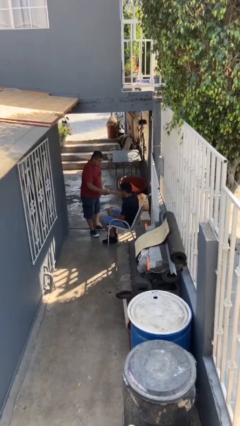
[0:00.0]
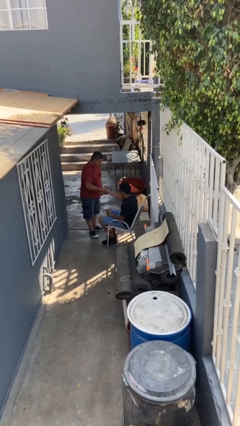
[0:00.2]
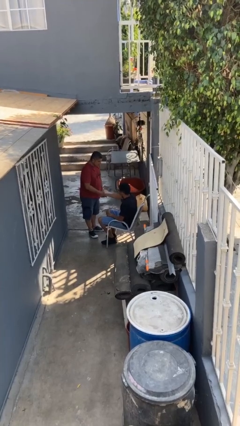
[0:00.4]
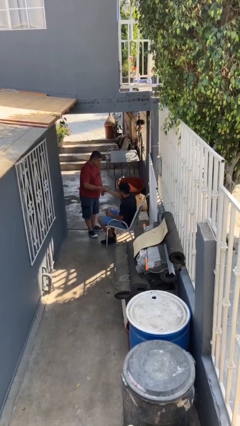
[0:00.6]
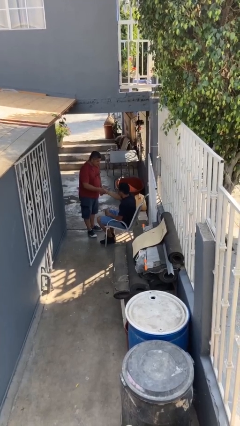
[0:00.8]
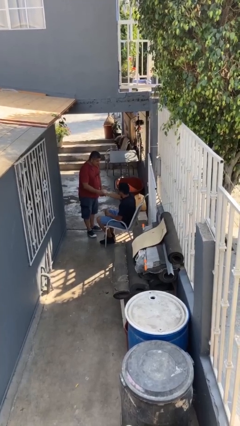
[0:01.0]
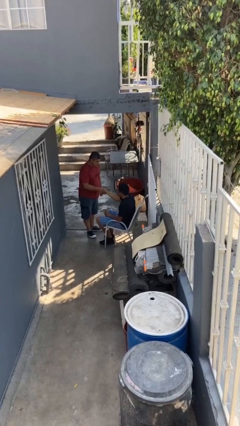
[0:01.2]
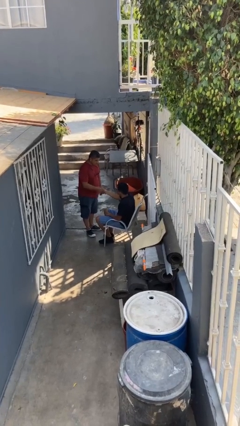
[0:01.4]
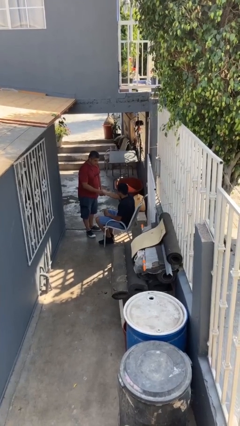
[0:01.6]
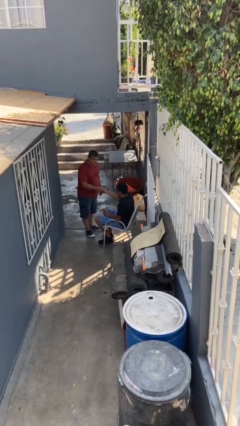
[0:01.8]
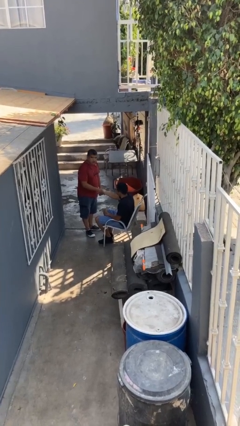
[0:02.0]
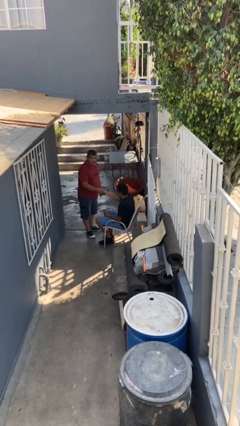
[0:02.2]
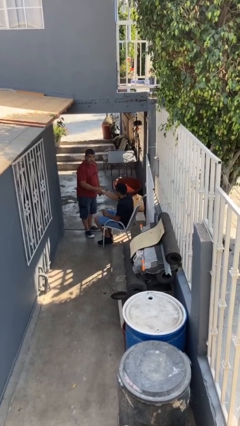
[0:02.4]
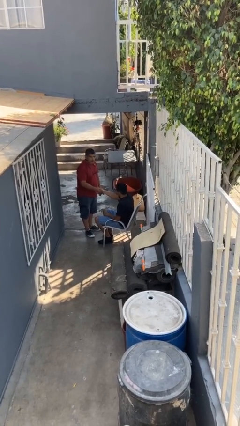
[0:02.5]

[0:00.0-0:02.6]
person shakes hand

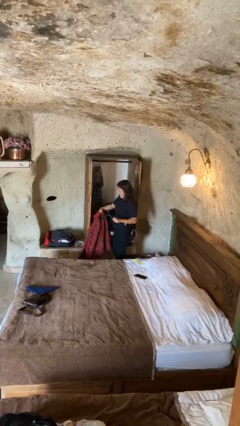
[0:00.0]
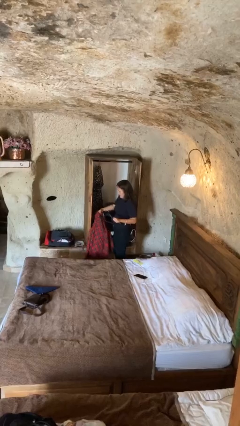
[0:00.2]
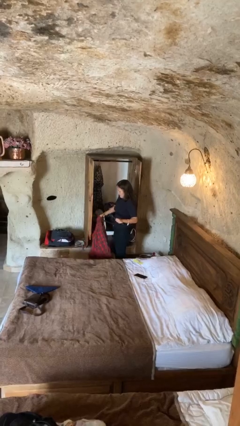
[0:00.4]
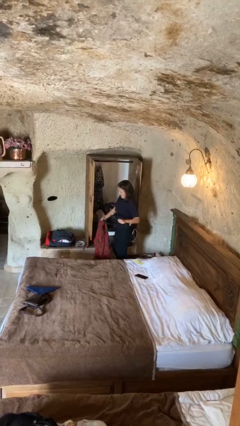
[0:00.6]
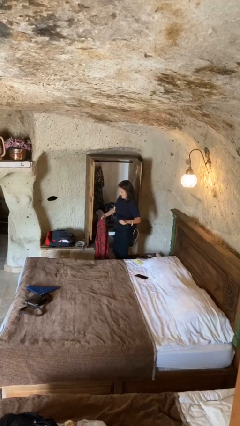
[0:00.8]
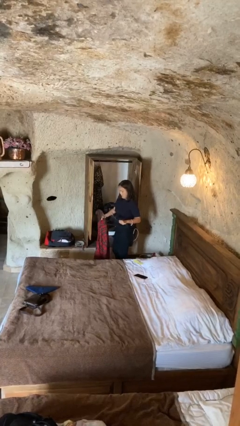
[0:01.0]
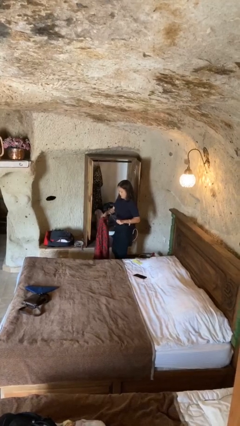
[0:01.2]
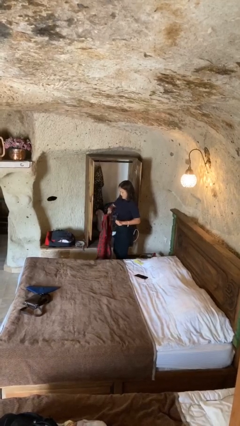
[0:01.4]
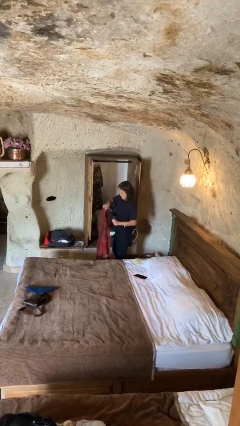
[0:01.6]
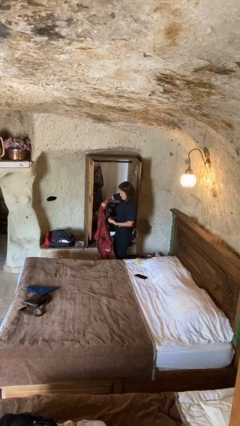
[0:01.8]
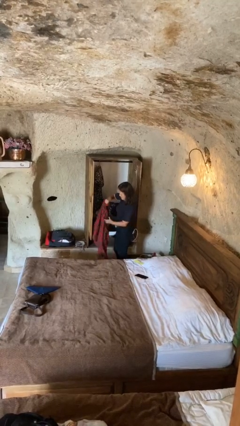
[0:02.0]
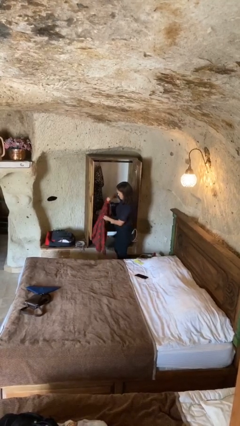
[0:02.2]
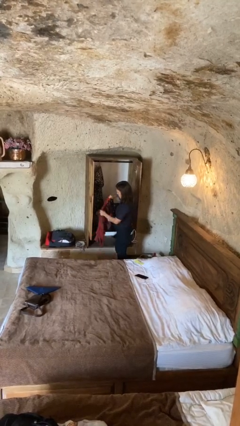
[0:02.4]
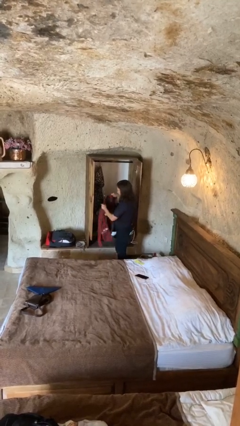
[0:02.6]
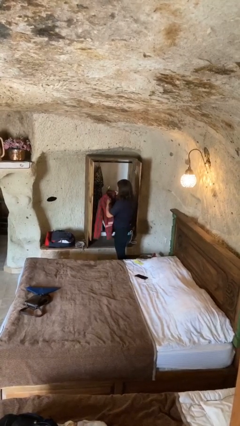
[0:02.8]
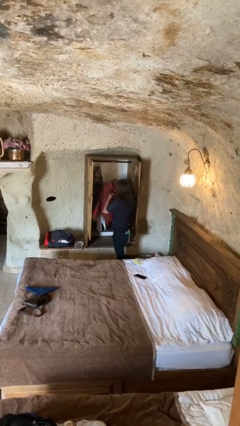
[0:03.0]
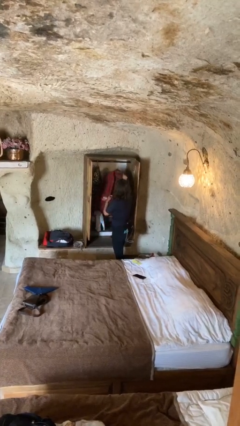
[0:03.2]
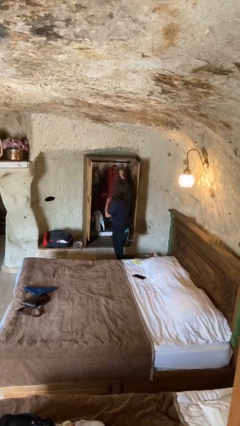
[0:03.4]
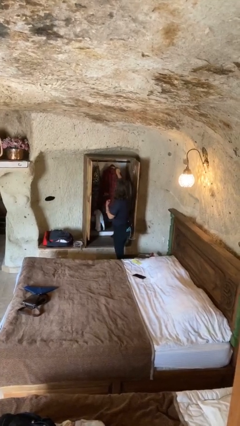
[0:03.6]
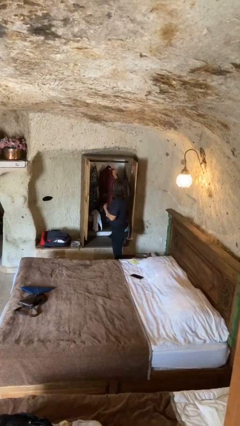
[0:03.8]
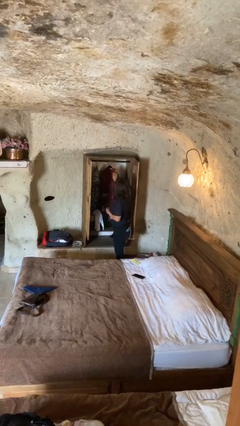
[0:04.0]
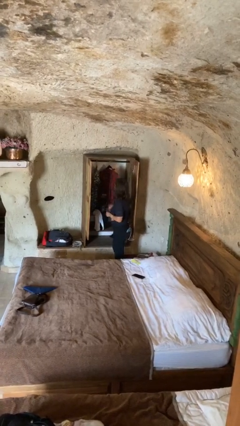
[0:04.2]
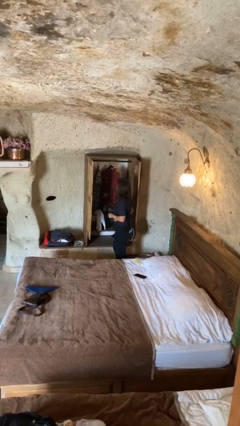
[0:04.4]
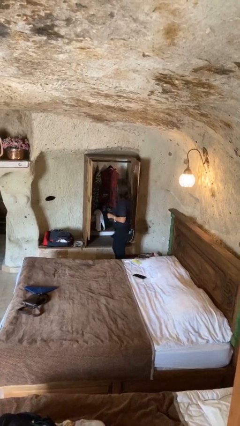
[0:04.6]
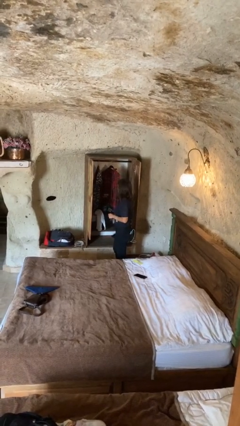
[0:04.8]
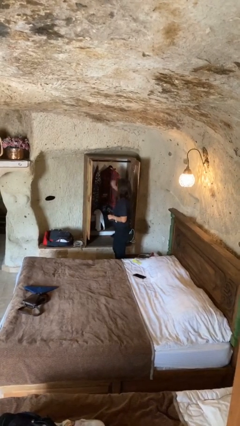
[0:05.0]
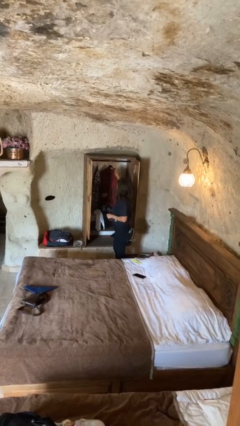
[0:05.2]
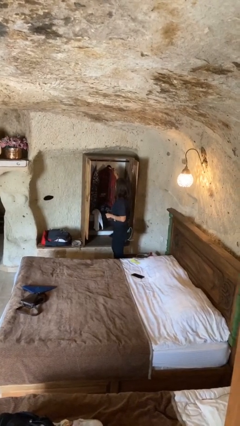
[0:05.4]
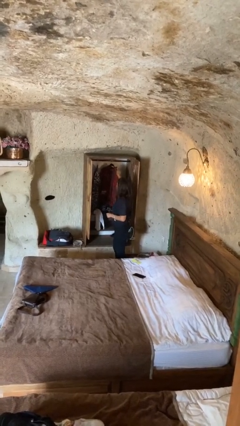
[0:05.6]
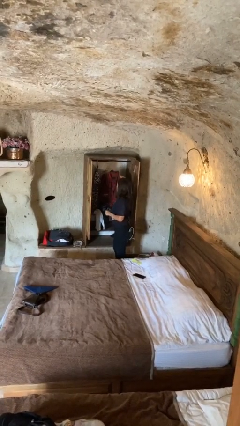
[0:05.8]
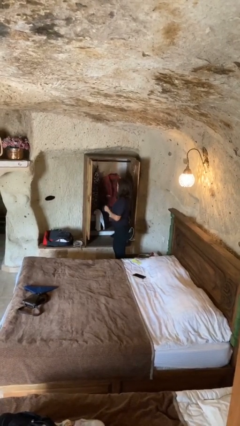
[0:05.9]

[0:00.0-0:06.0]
person puts clothes into closet

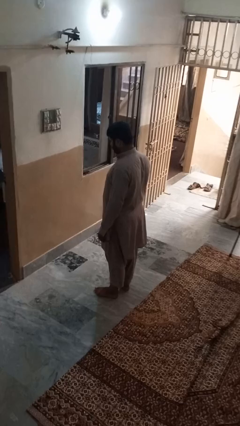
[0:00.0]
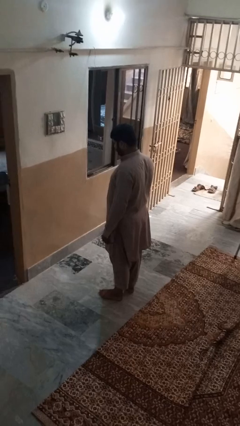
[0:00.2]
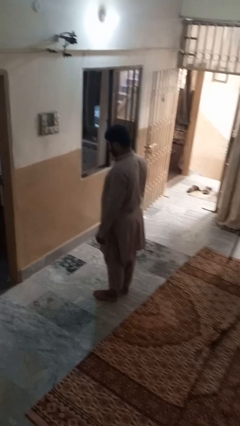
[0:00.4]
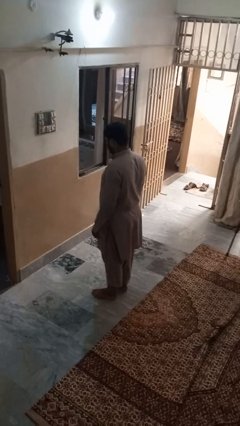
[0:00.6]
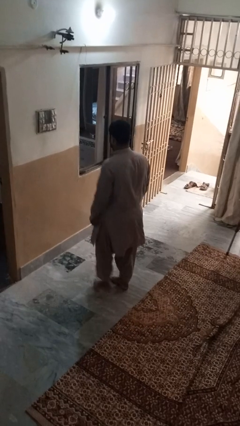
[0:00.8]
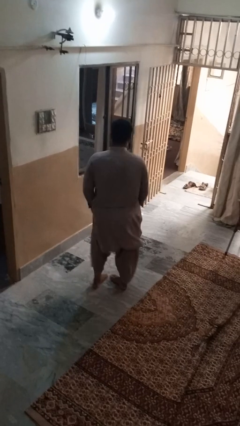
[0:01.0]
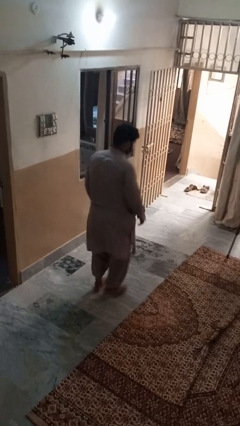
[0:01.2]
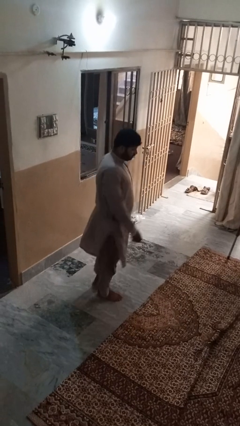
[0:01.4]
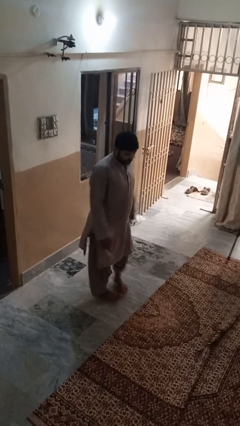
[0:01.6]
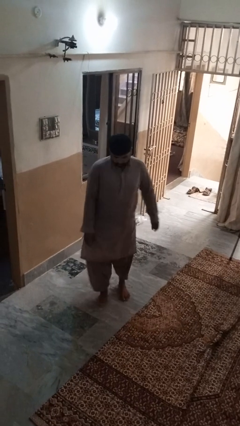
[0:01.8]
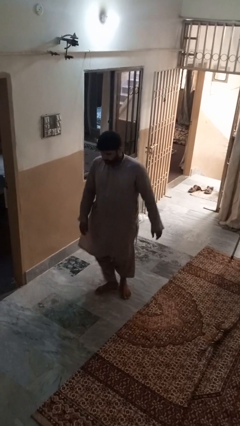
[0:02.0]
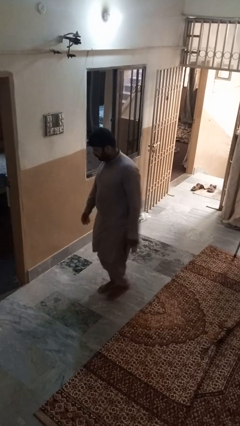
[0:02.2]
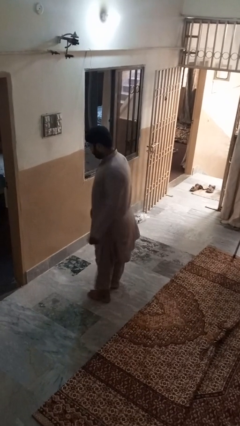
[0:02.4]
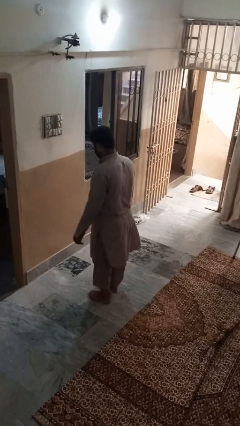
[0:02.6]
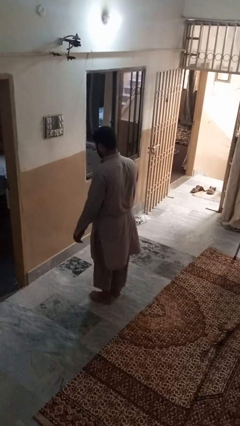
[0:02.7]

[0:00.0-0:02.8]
person twirls

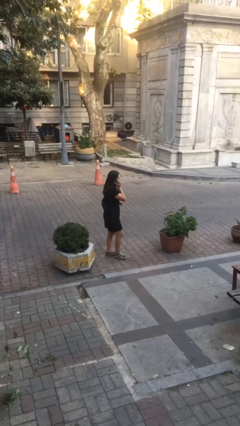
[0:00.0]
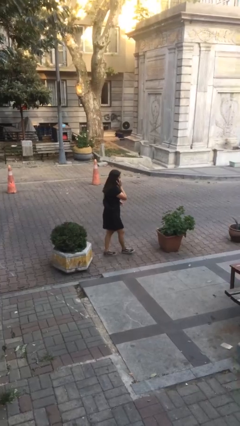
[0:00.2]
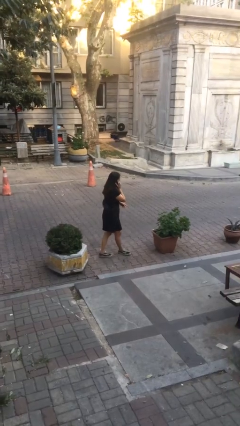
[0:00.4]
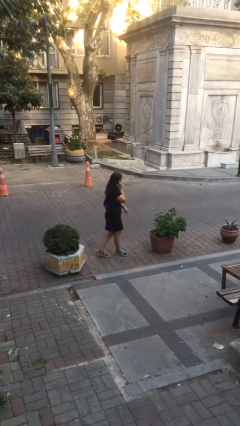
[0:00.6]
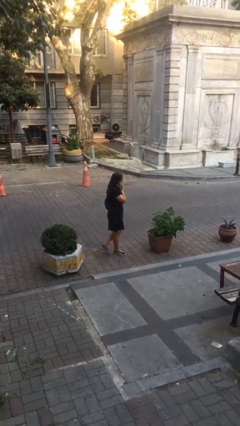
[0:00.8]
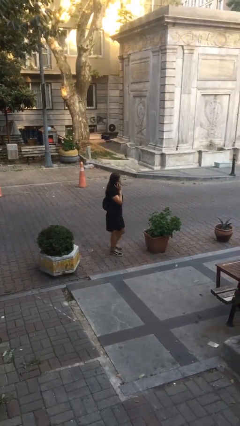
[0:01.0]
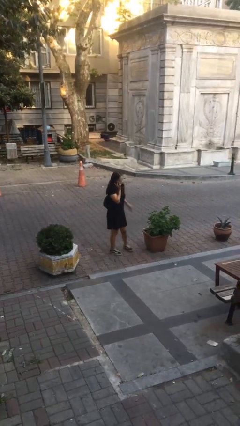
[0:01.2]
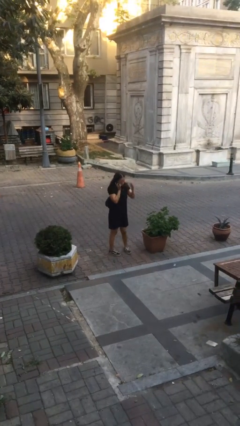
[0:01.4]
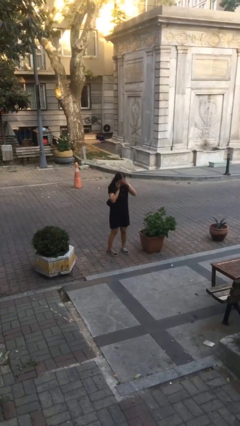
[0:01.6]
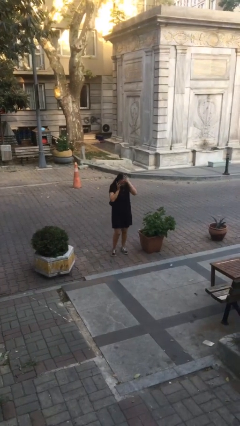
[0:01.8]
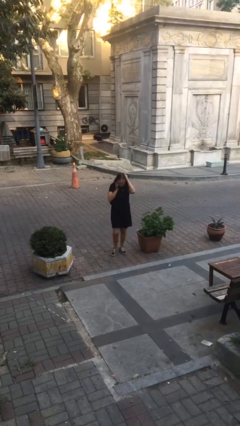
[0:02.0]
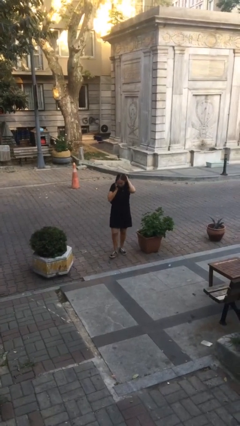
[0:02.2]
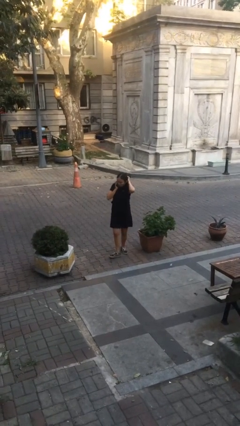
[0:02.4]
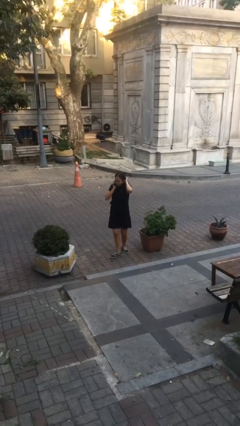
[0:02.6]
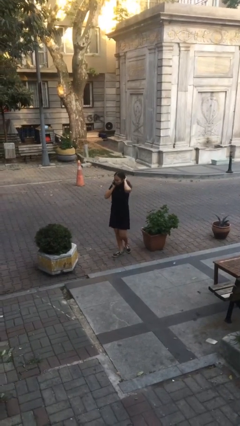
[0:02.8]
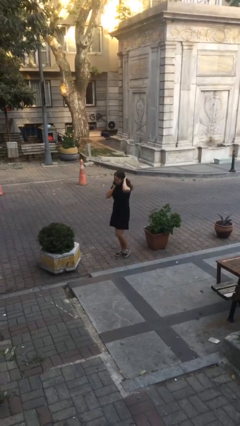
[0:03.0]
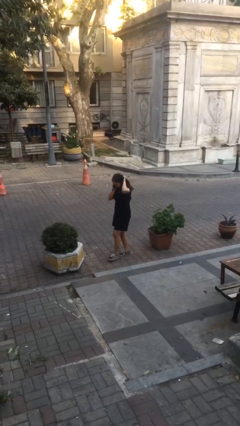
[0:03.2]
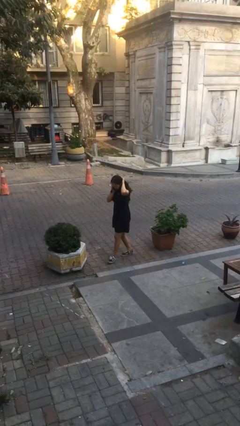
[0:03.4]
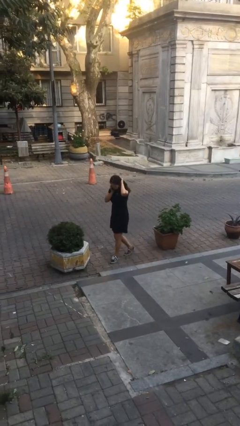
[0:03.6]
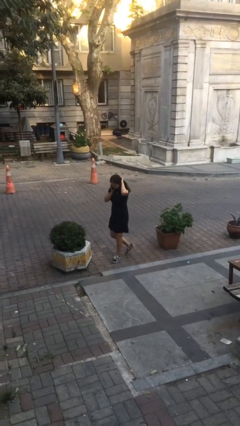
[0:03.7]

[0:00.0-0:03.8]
person talks on phone

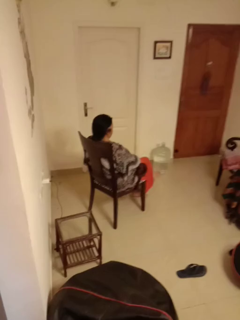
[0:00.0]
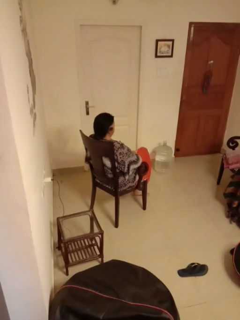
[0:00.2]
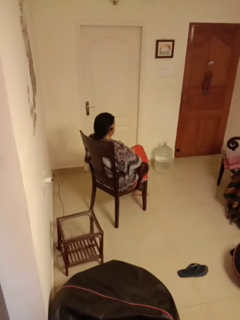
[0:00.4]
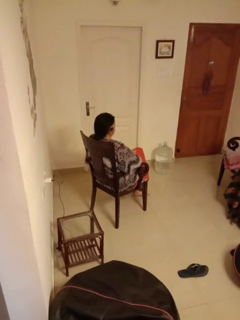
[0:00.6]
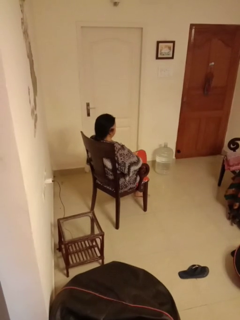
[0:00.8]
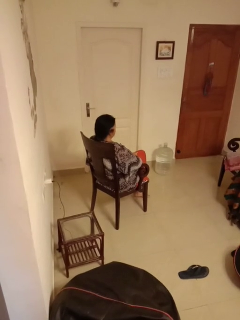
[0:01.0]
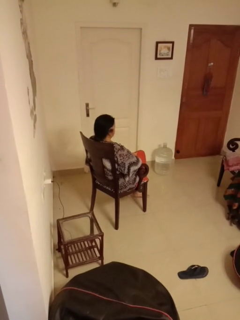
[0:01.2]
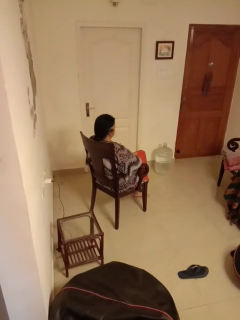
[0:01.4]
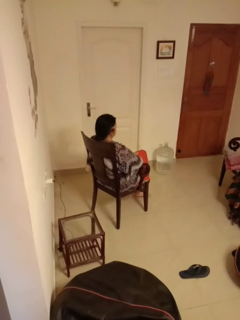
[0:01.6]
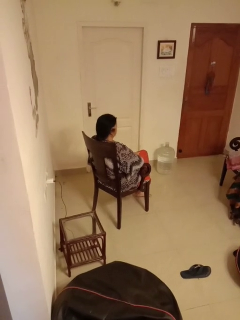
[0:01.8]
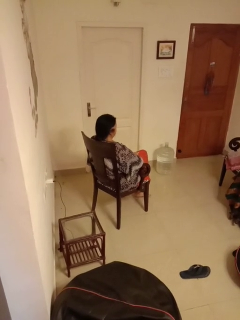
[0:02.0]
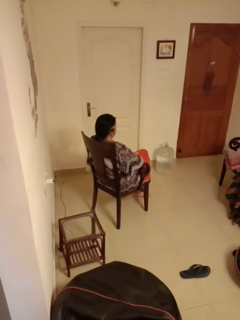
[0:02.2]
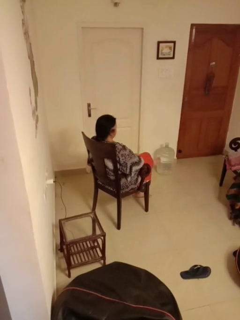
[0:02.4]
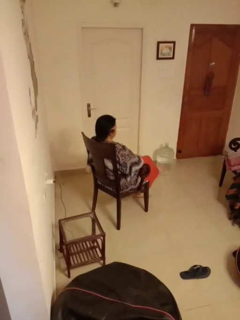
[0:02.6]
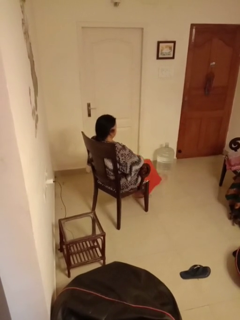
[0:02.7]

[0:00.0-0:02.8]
person crosses legs

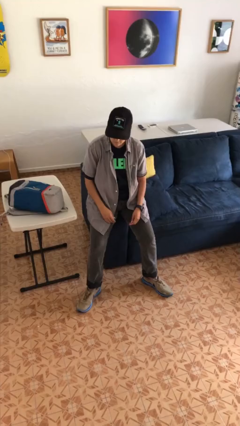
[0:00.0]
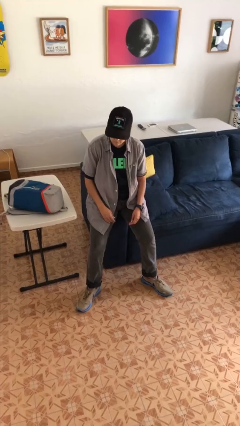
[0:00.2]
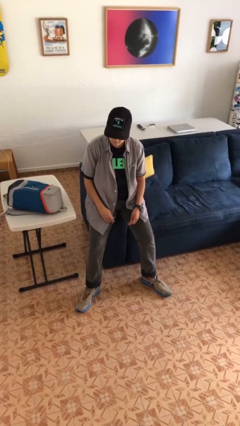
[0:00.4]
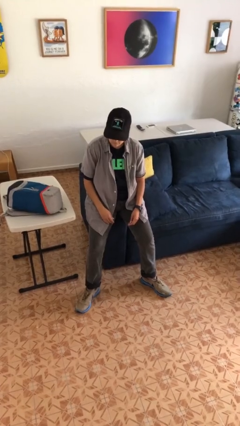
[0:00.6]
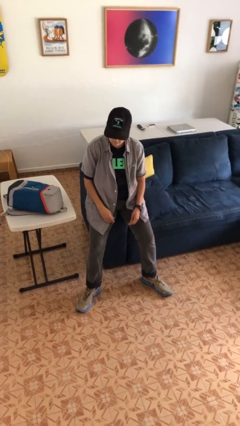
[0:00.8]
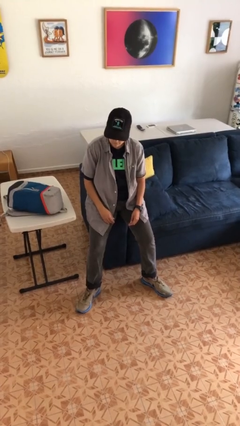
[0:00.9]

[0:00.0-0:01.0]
person waves hand over object
